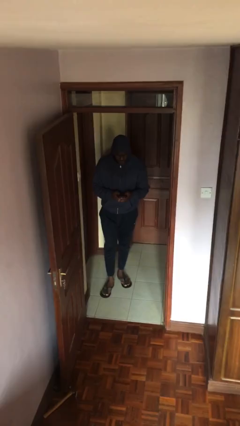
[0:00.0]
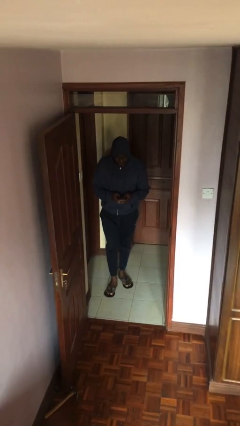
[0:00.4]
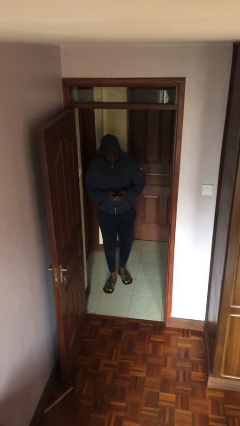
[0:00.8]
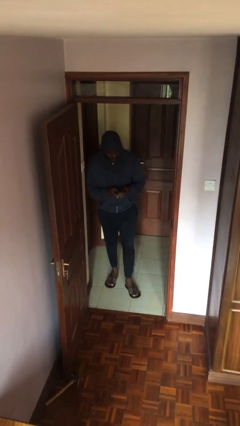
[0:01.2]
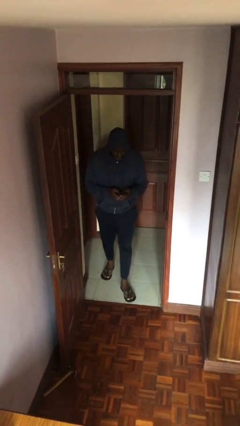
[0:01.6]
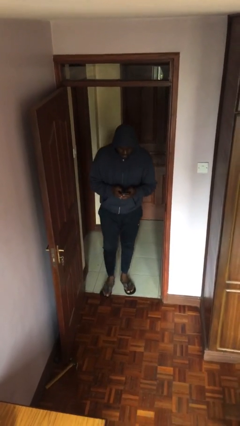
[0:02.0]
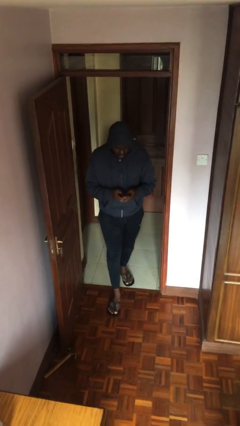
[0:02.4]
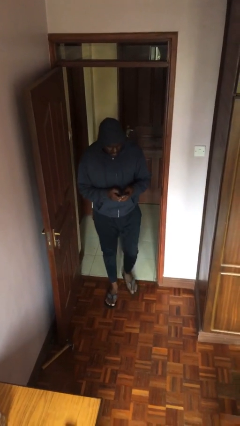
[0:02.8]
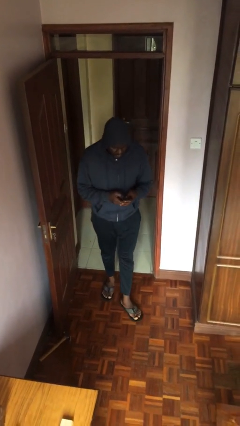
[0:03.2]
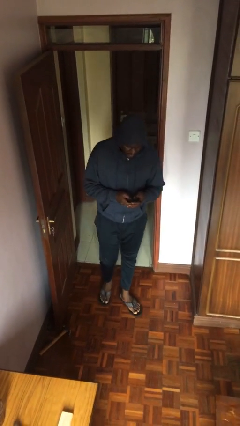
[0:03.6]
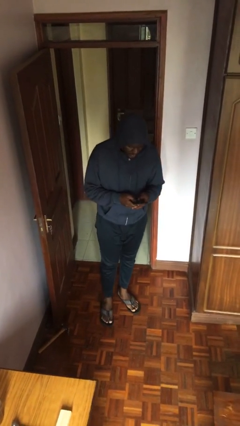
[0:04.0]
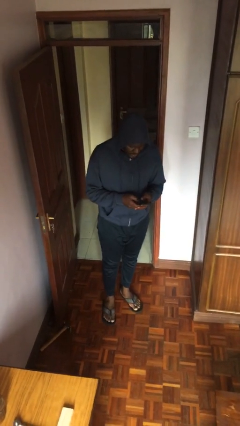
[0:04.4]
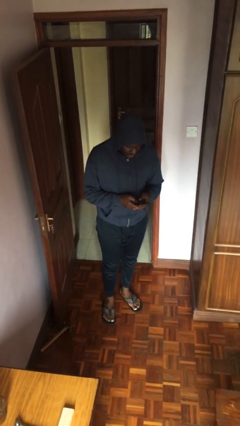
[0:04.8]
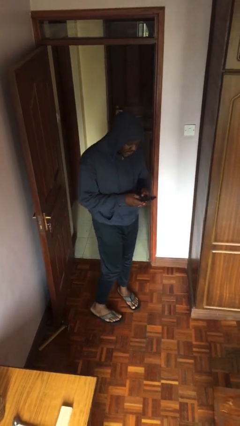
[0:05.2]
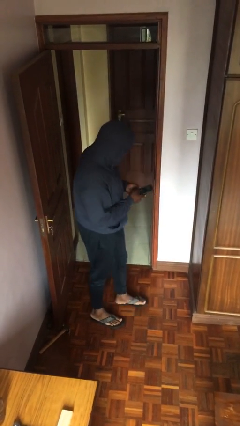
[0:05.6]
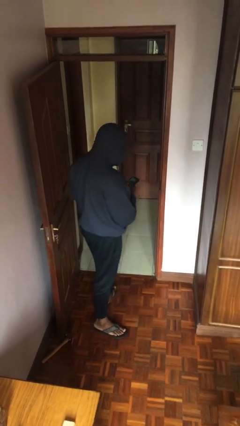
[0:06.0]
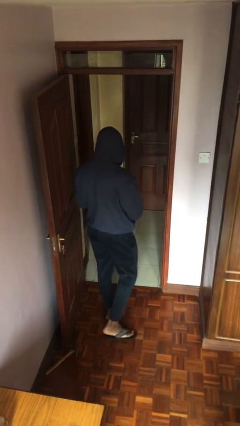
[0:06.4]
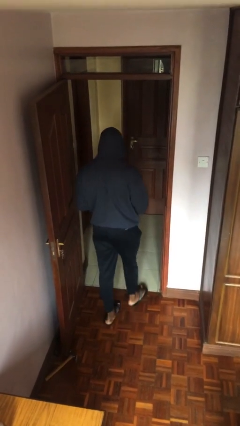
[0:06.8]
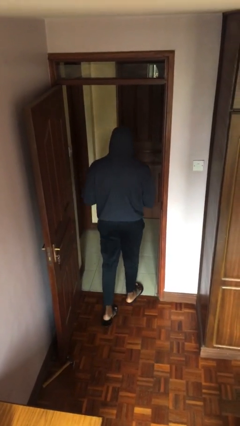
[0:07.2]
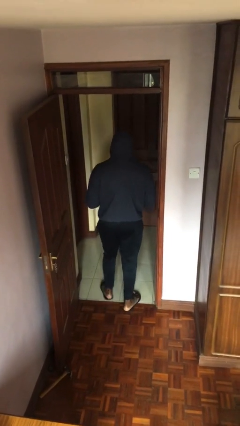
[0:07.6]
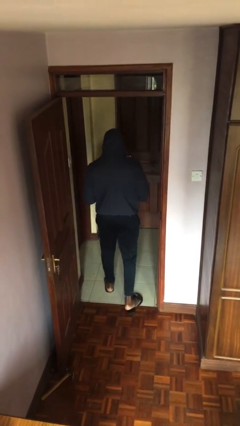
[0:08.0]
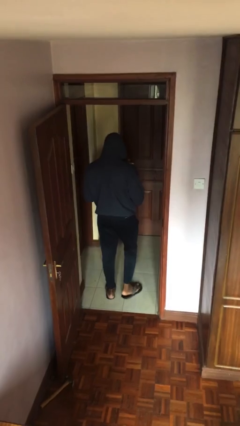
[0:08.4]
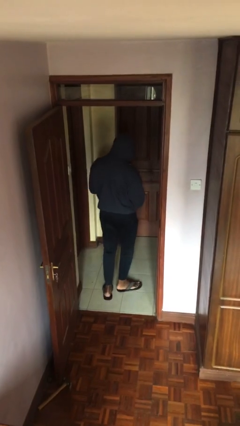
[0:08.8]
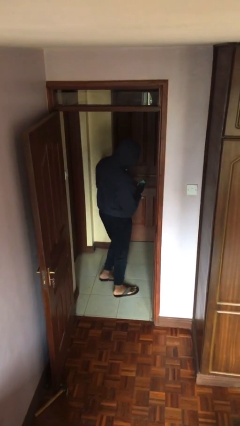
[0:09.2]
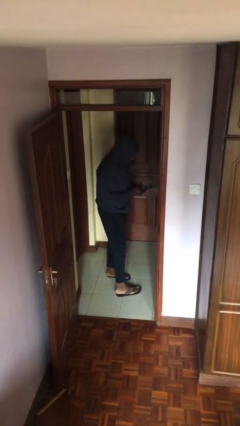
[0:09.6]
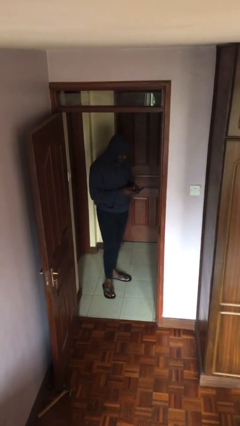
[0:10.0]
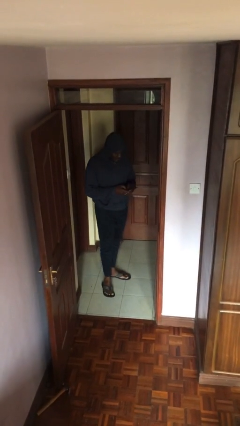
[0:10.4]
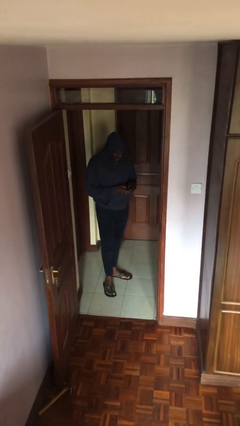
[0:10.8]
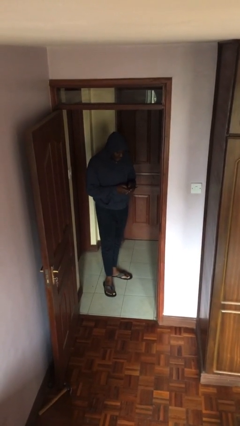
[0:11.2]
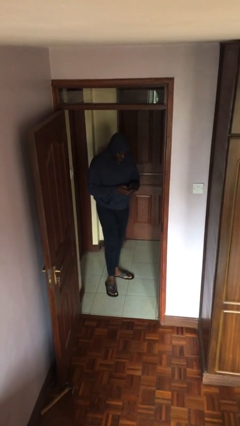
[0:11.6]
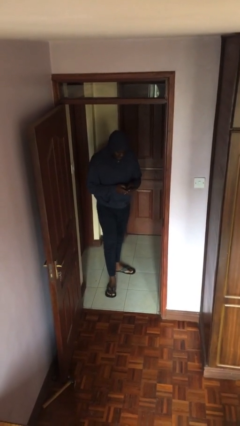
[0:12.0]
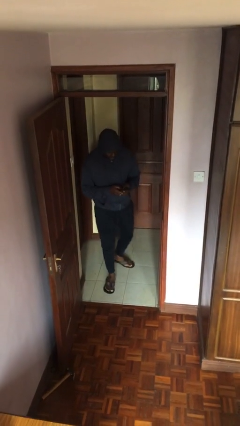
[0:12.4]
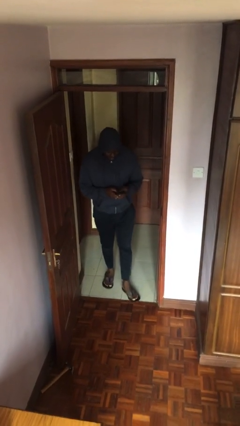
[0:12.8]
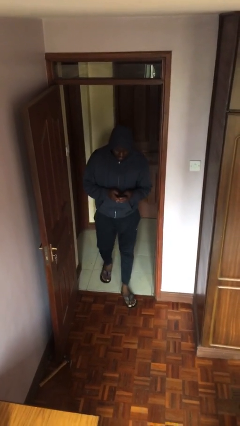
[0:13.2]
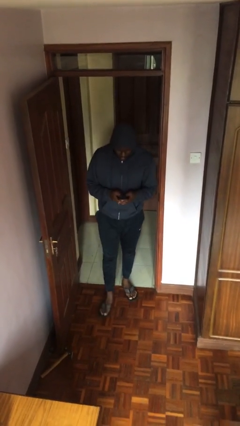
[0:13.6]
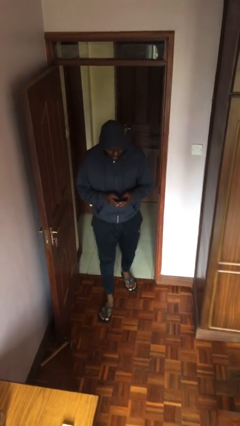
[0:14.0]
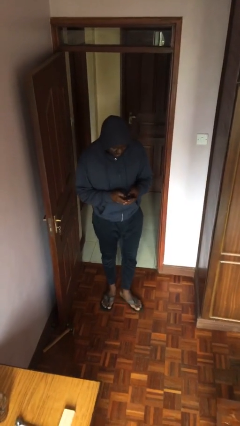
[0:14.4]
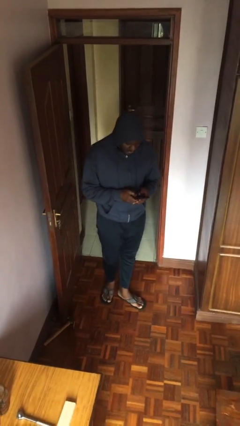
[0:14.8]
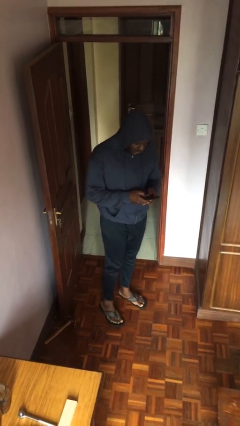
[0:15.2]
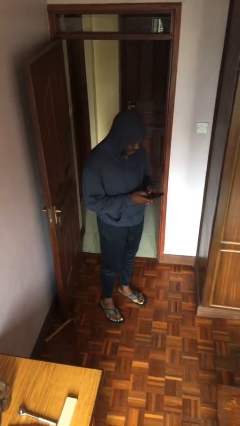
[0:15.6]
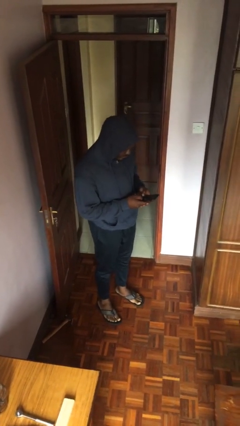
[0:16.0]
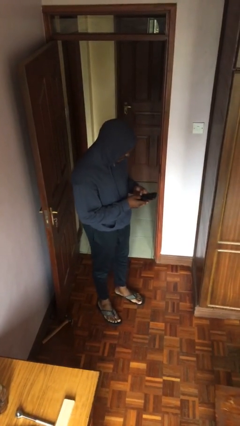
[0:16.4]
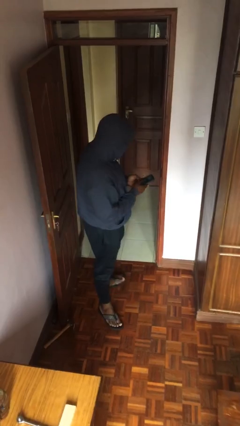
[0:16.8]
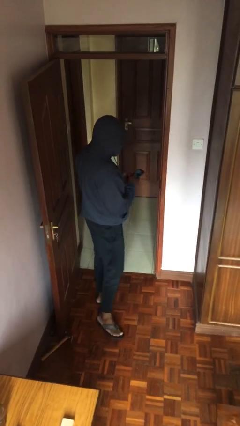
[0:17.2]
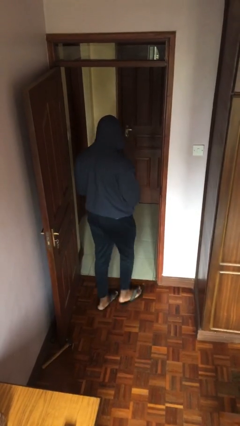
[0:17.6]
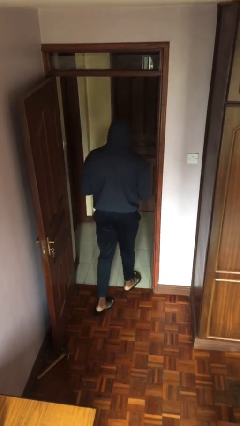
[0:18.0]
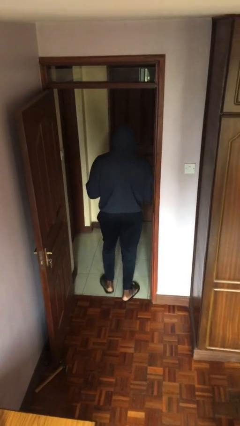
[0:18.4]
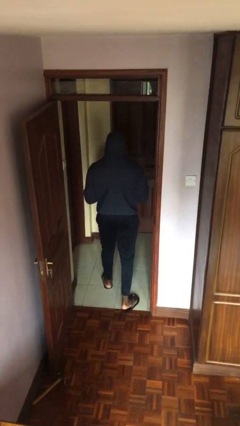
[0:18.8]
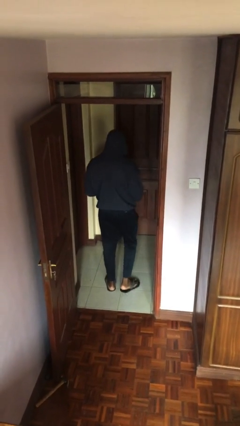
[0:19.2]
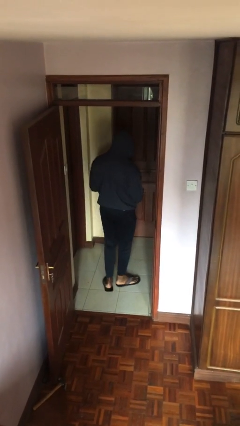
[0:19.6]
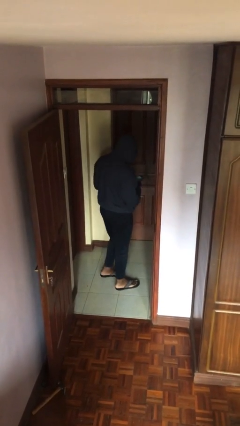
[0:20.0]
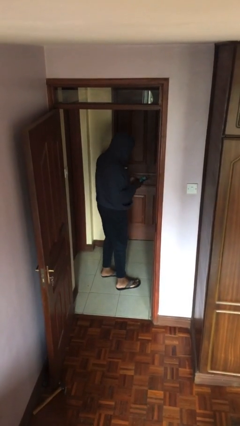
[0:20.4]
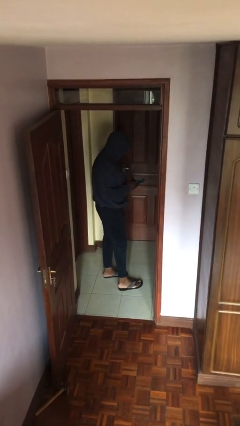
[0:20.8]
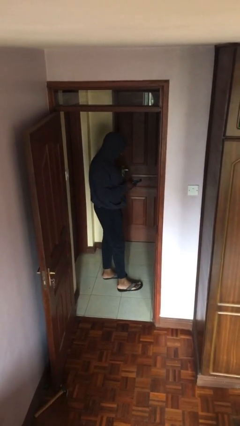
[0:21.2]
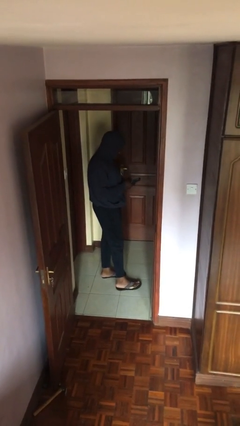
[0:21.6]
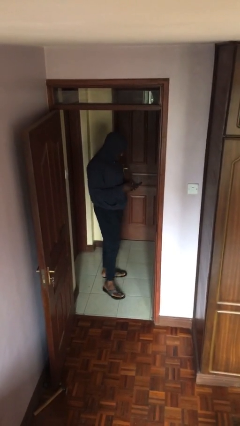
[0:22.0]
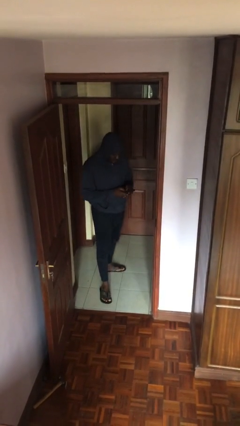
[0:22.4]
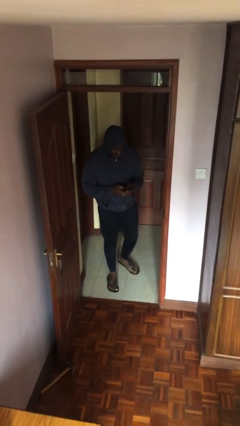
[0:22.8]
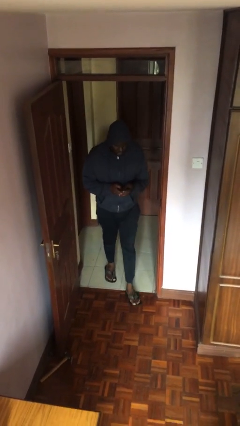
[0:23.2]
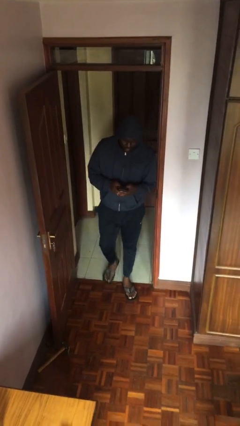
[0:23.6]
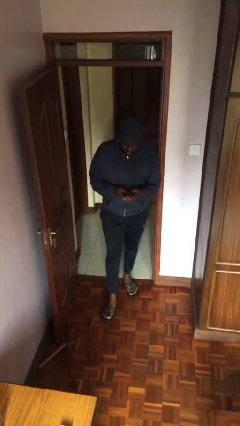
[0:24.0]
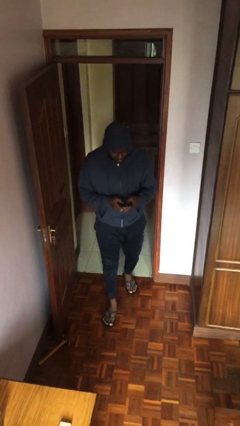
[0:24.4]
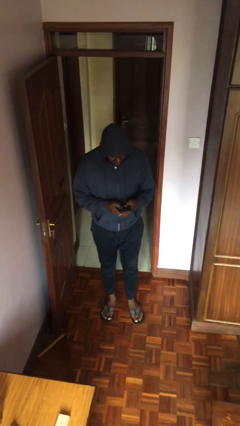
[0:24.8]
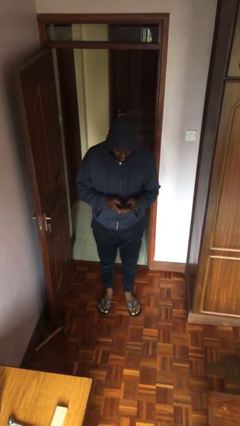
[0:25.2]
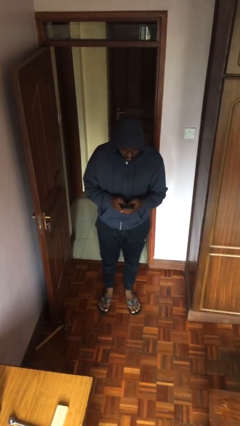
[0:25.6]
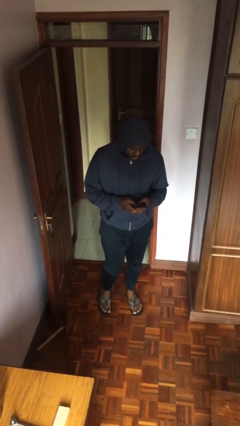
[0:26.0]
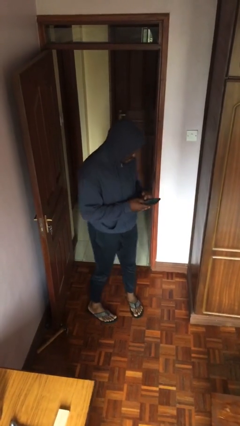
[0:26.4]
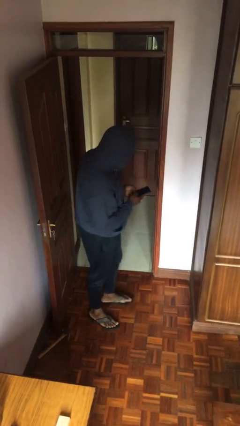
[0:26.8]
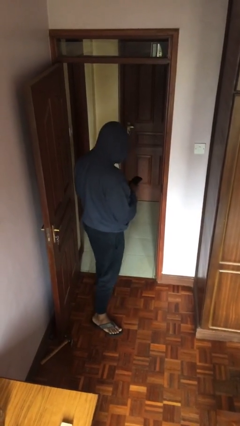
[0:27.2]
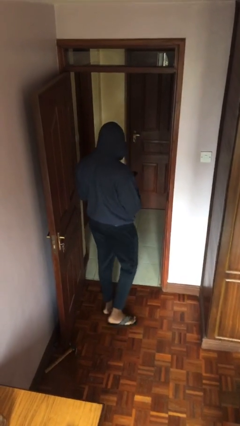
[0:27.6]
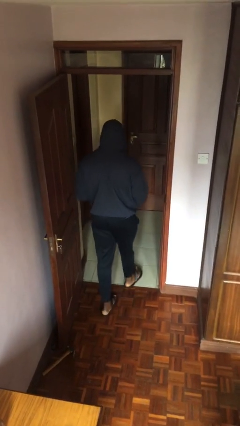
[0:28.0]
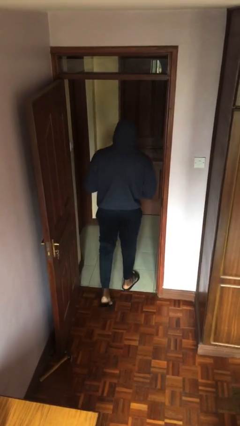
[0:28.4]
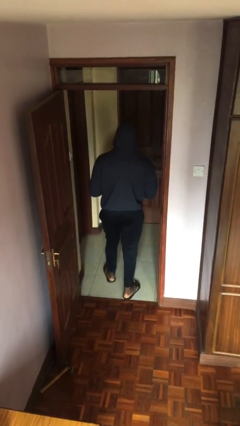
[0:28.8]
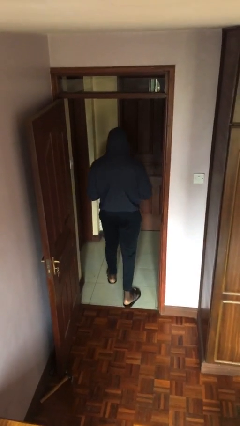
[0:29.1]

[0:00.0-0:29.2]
person texts on phone

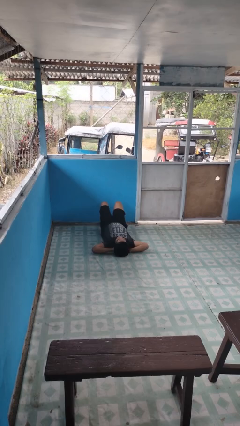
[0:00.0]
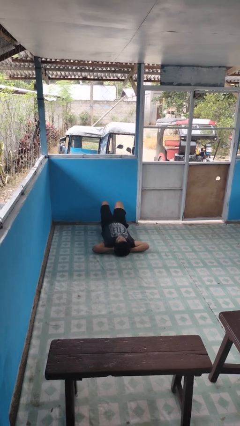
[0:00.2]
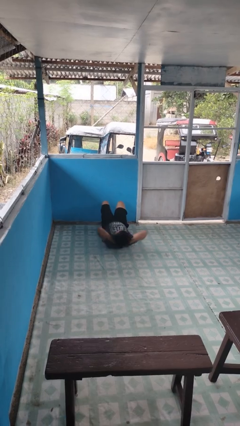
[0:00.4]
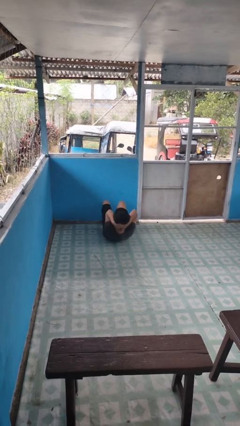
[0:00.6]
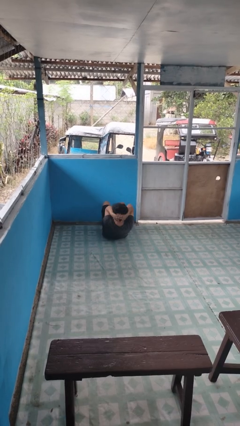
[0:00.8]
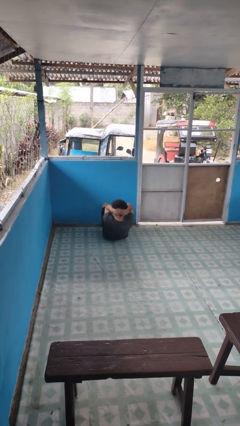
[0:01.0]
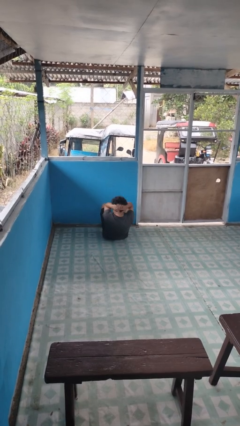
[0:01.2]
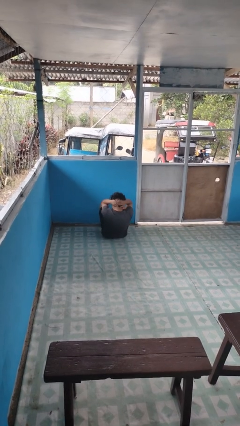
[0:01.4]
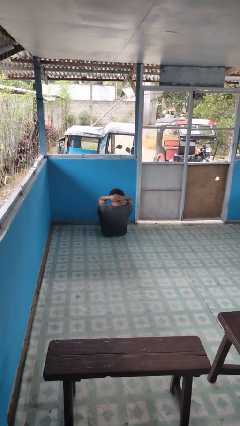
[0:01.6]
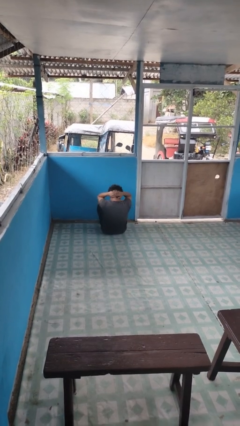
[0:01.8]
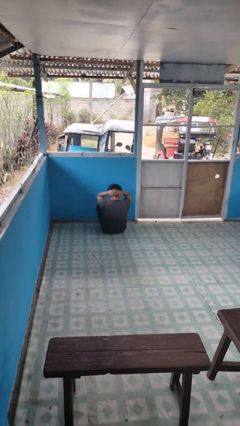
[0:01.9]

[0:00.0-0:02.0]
person exercises with situp

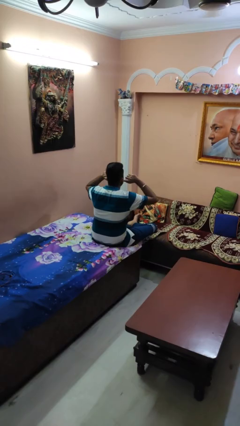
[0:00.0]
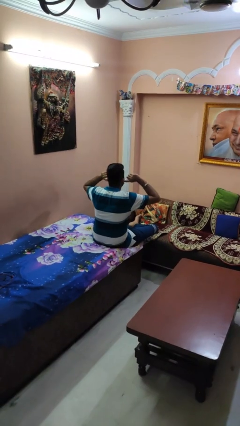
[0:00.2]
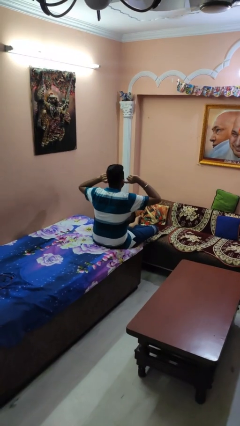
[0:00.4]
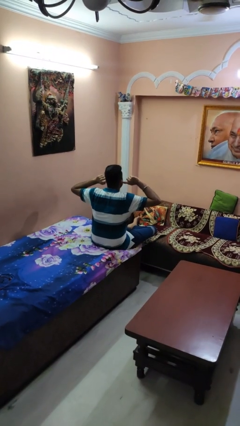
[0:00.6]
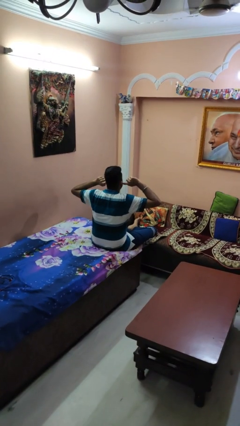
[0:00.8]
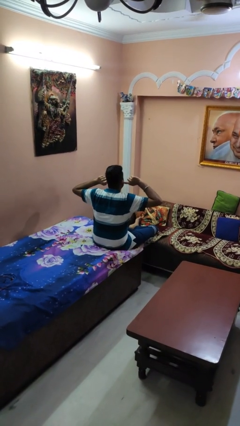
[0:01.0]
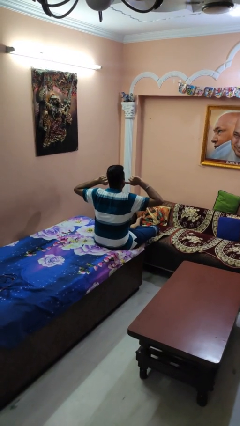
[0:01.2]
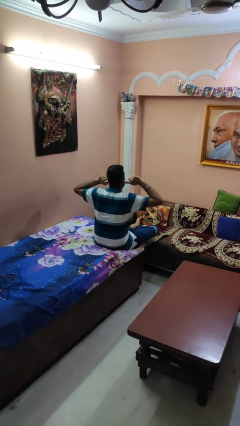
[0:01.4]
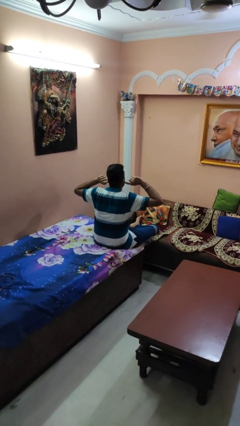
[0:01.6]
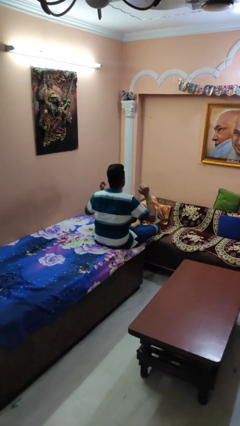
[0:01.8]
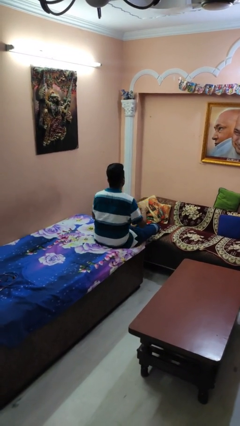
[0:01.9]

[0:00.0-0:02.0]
person puts fingers in ear
